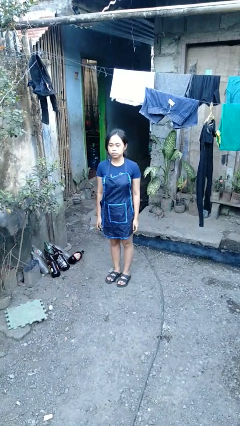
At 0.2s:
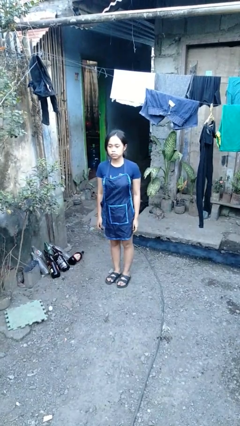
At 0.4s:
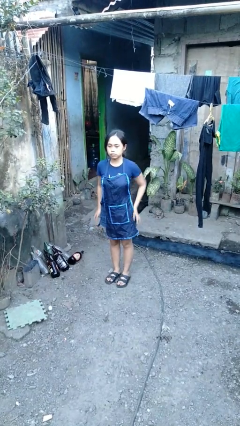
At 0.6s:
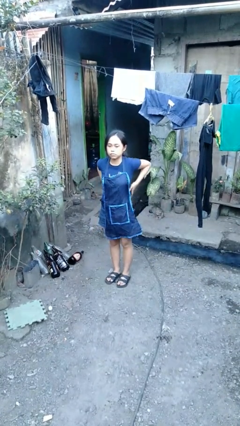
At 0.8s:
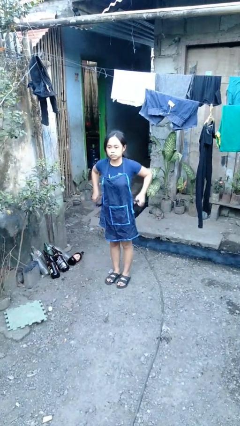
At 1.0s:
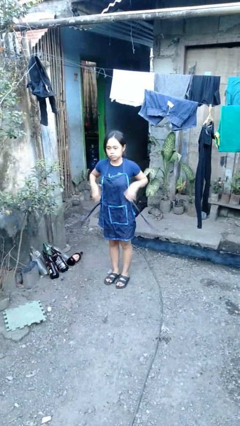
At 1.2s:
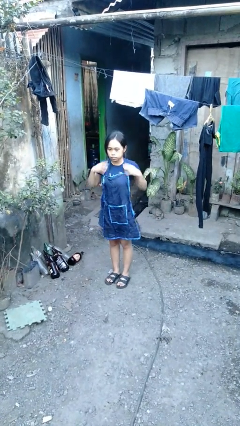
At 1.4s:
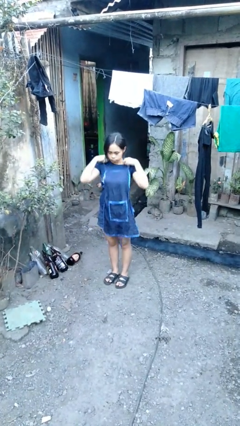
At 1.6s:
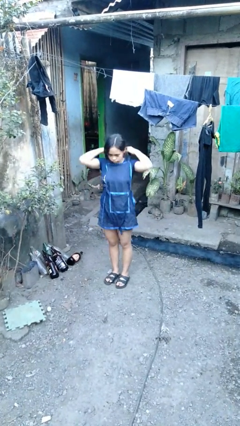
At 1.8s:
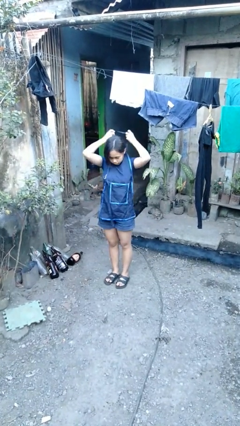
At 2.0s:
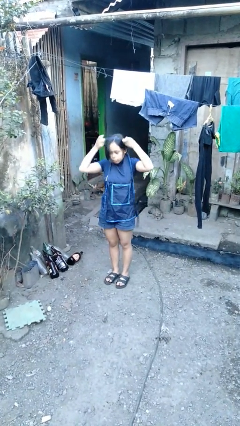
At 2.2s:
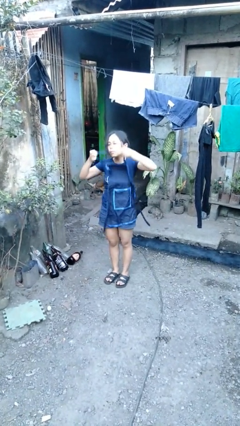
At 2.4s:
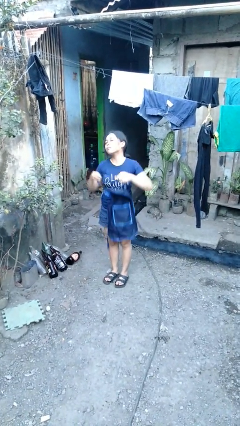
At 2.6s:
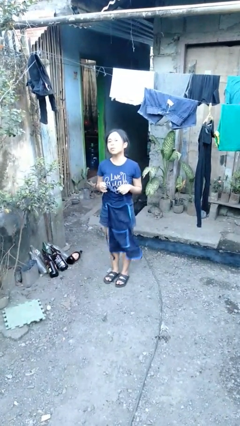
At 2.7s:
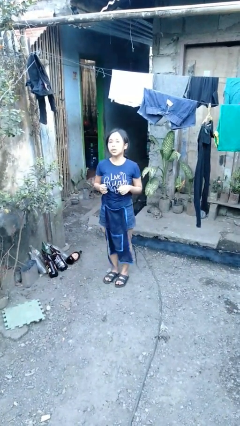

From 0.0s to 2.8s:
person takes off apron

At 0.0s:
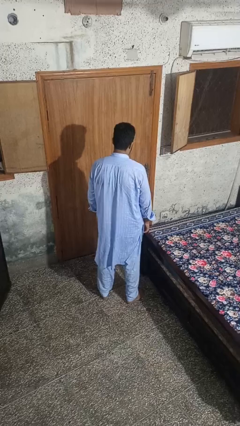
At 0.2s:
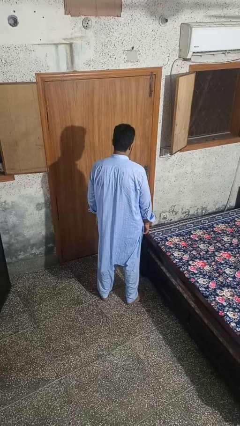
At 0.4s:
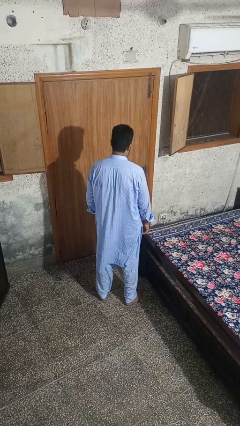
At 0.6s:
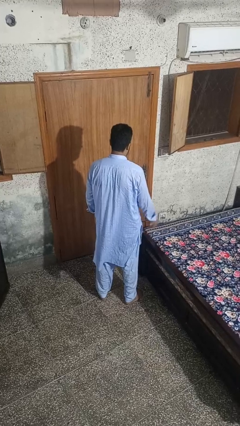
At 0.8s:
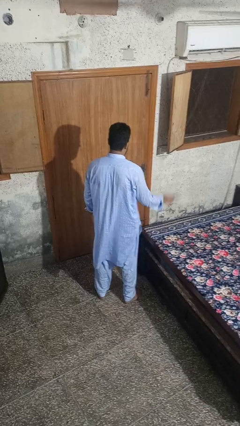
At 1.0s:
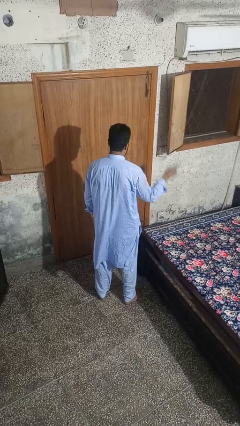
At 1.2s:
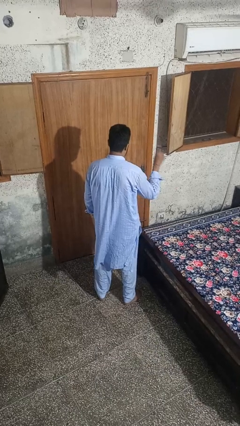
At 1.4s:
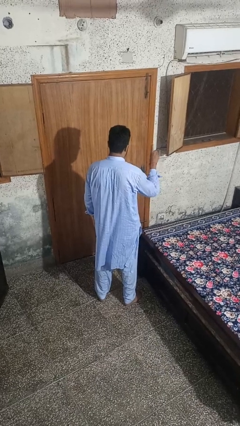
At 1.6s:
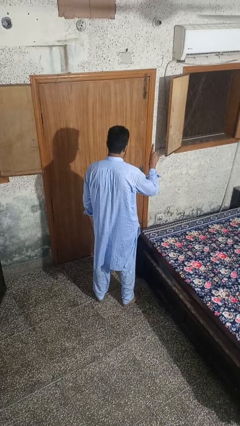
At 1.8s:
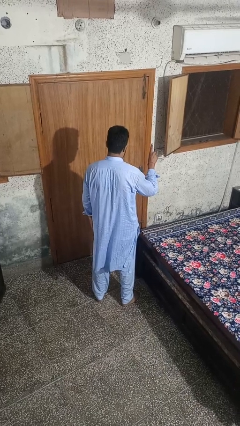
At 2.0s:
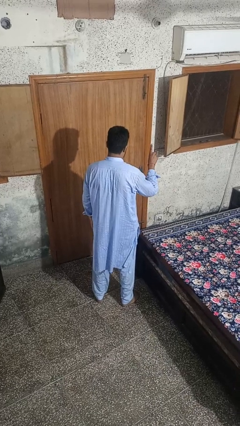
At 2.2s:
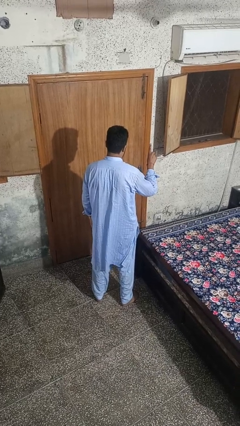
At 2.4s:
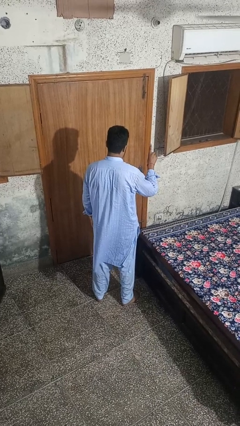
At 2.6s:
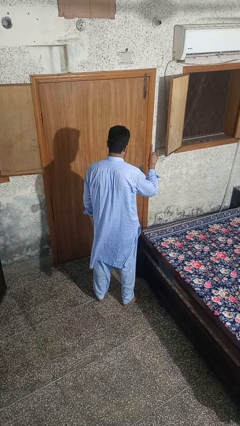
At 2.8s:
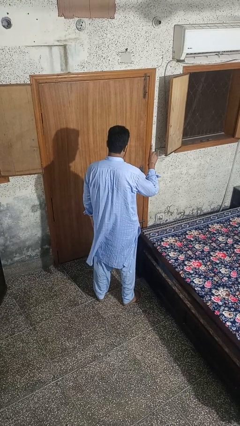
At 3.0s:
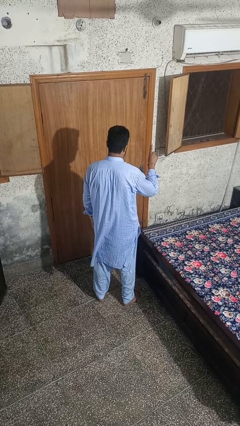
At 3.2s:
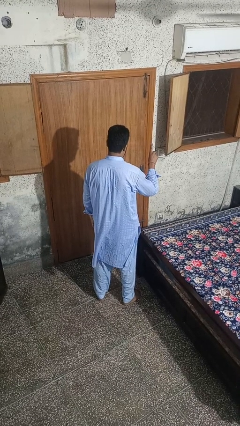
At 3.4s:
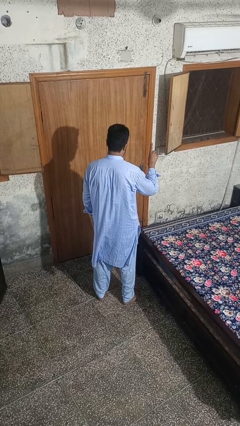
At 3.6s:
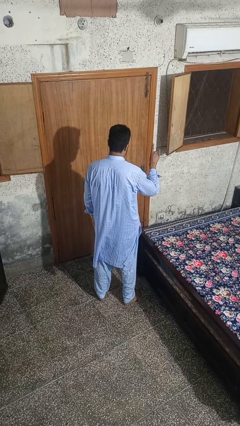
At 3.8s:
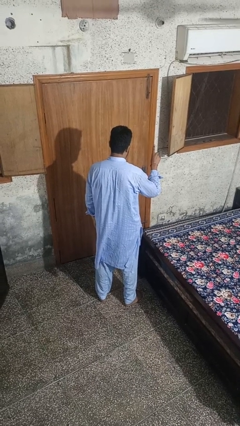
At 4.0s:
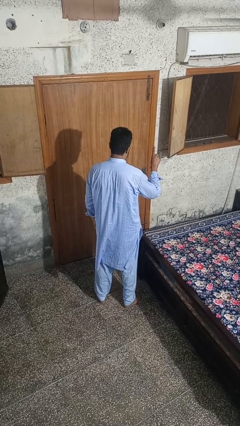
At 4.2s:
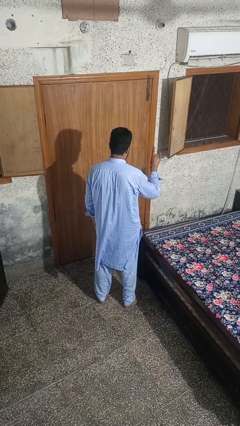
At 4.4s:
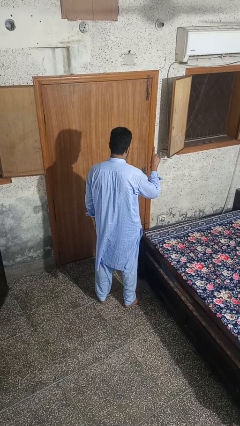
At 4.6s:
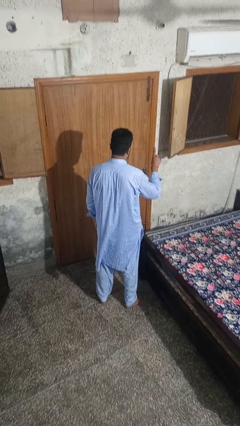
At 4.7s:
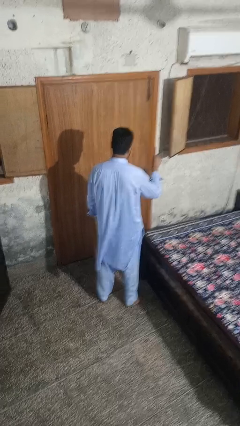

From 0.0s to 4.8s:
person gestures number one

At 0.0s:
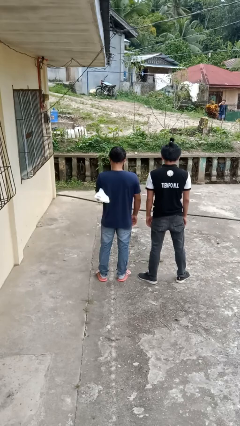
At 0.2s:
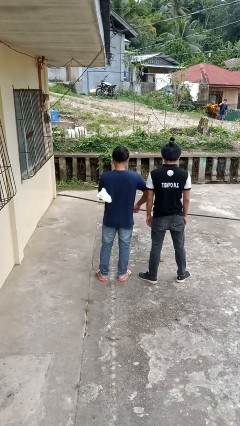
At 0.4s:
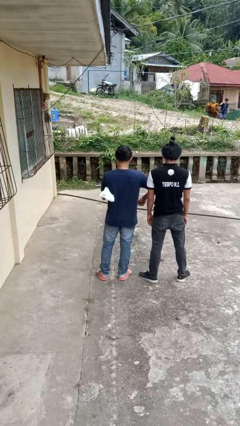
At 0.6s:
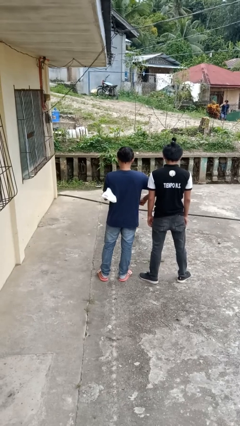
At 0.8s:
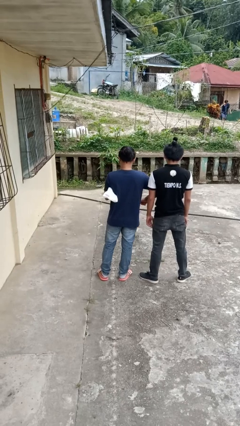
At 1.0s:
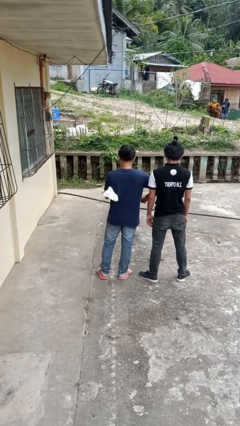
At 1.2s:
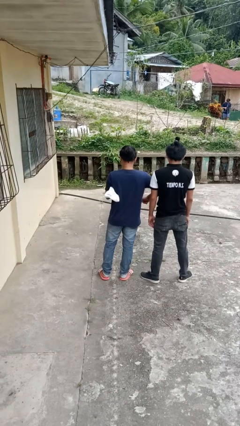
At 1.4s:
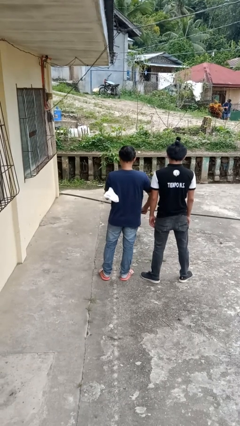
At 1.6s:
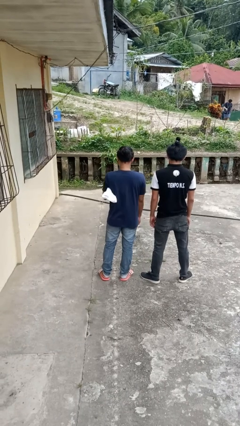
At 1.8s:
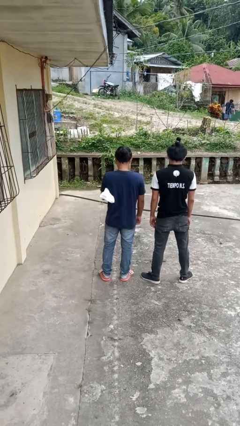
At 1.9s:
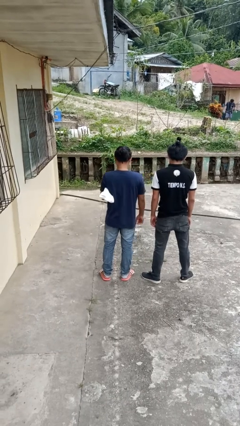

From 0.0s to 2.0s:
person nudges person with elbow

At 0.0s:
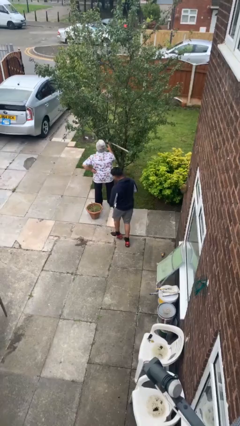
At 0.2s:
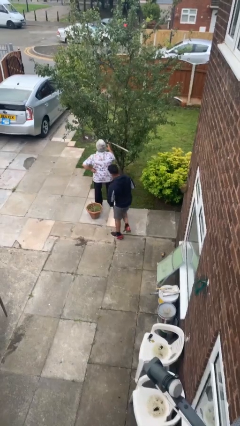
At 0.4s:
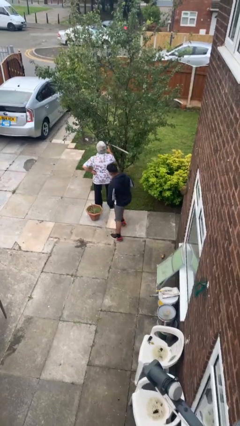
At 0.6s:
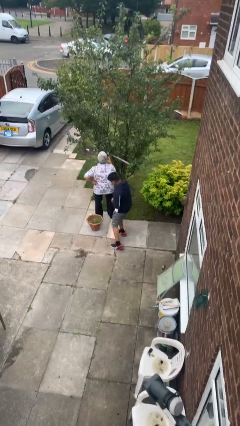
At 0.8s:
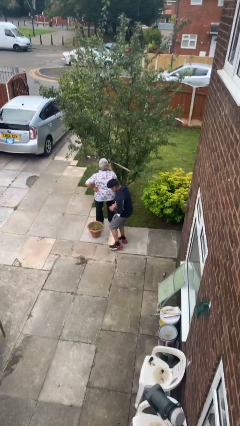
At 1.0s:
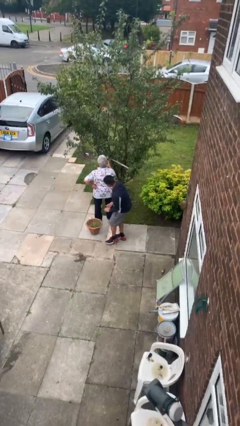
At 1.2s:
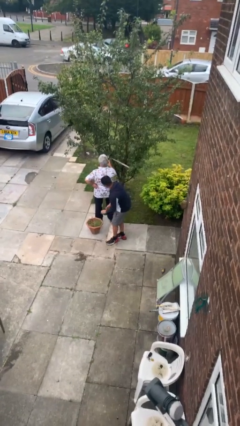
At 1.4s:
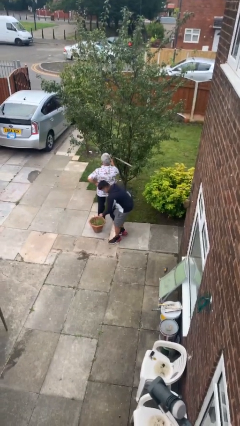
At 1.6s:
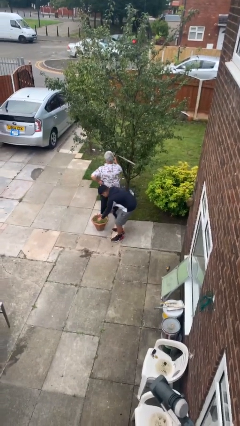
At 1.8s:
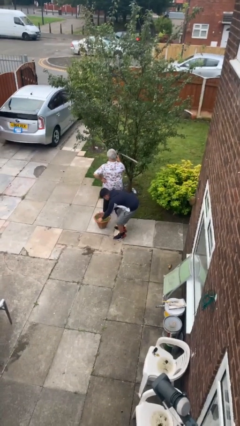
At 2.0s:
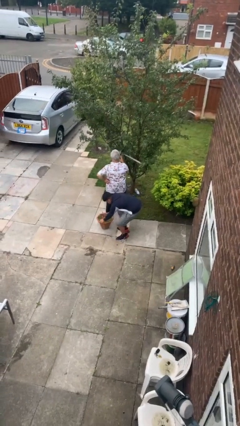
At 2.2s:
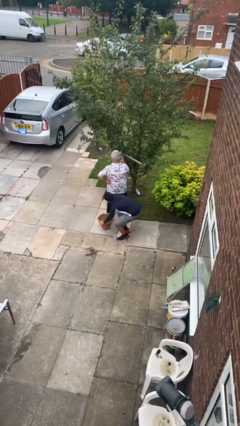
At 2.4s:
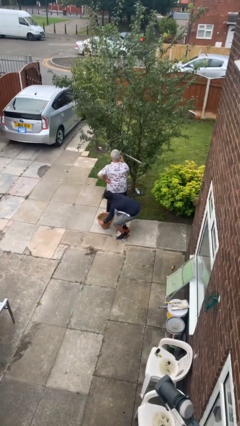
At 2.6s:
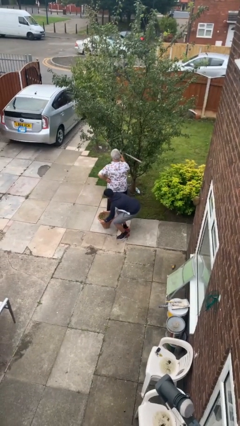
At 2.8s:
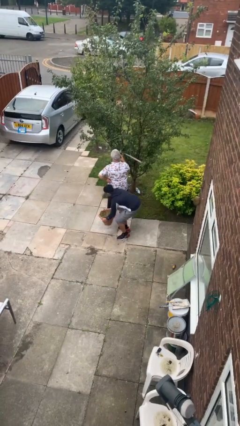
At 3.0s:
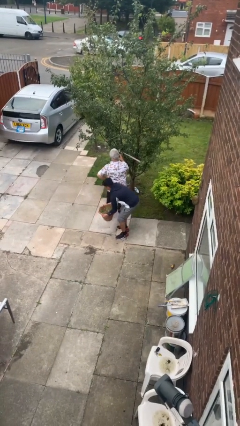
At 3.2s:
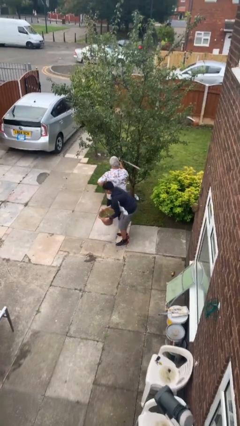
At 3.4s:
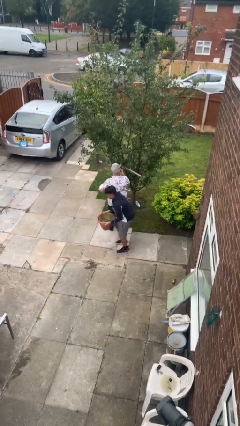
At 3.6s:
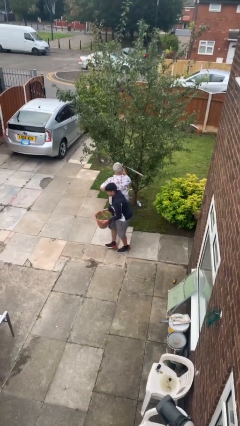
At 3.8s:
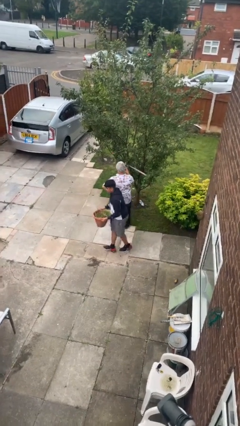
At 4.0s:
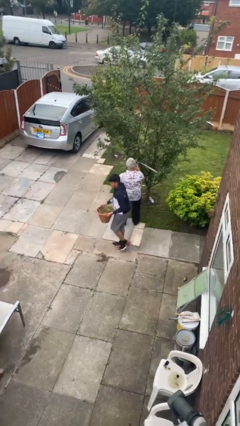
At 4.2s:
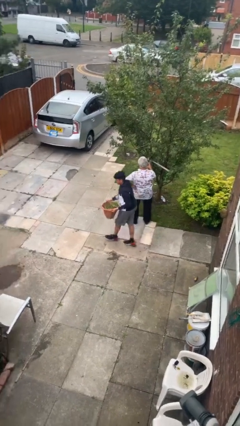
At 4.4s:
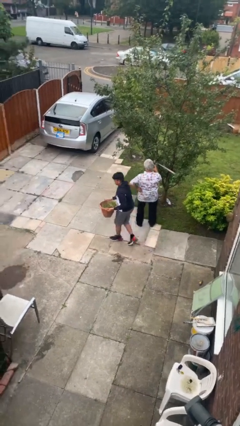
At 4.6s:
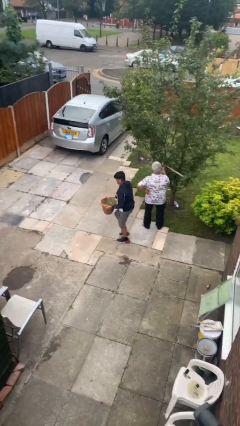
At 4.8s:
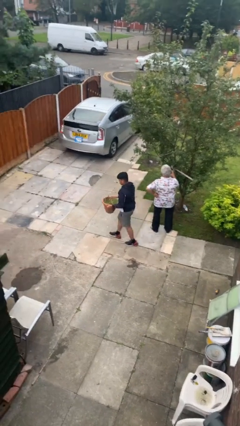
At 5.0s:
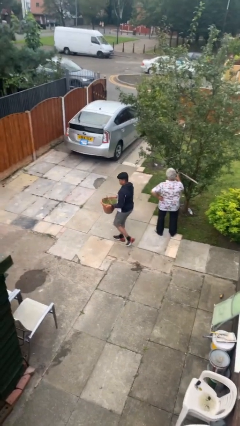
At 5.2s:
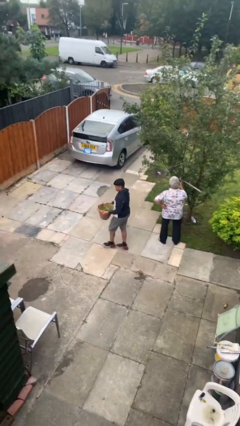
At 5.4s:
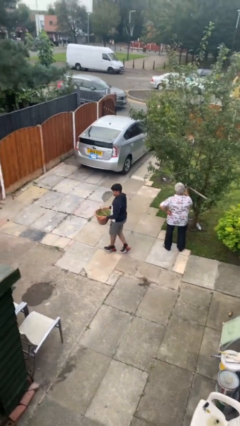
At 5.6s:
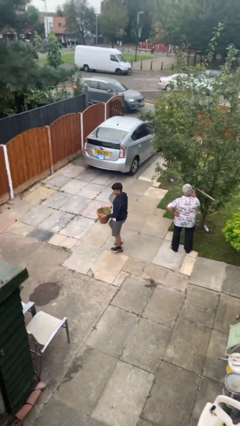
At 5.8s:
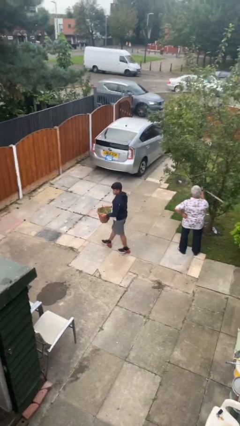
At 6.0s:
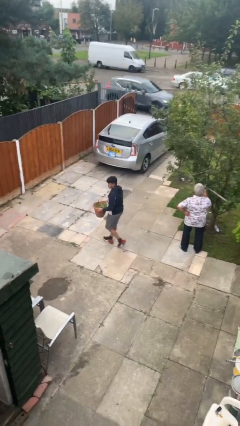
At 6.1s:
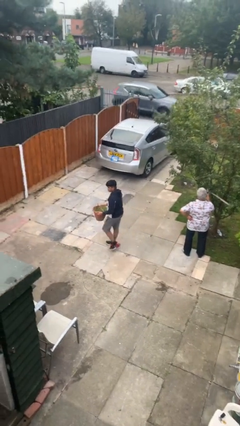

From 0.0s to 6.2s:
person steals object from person

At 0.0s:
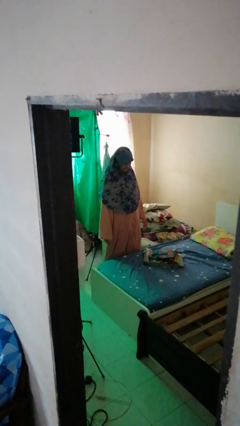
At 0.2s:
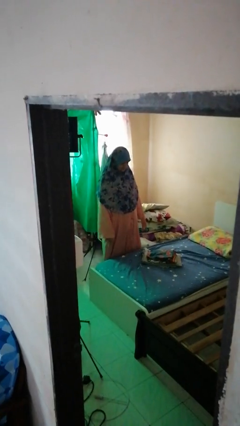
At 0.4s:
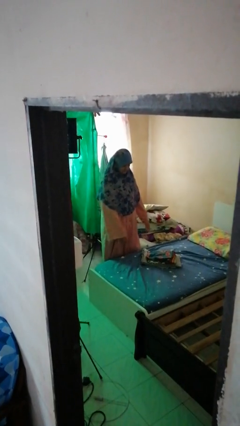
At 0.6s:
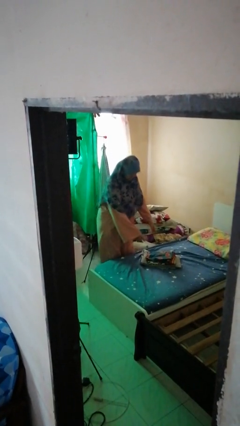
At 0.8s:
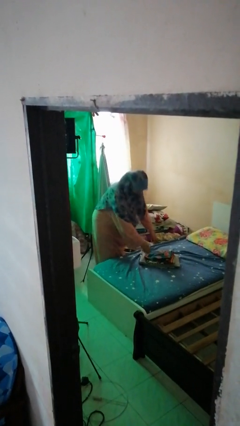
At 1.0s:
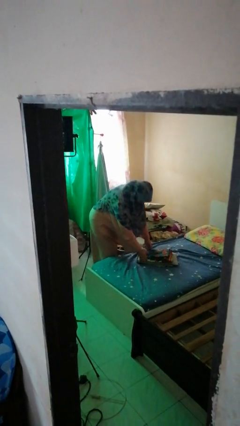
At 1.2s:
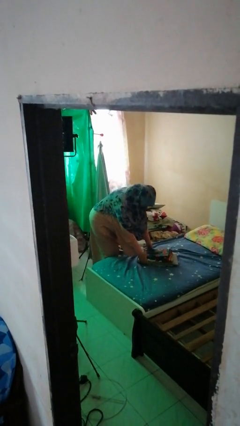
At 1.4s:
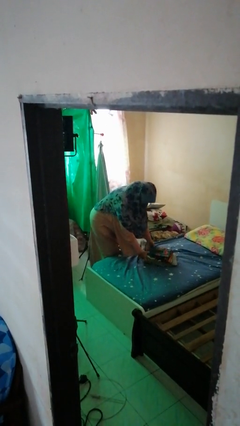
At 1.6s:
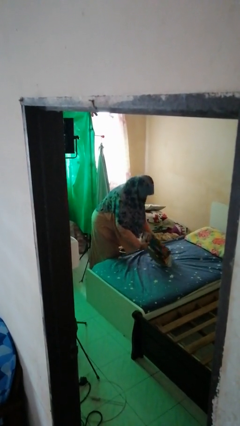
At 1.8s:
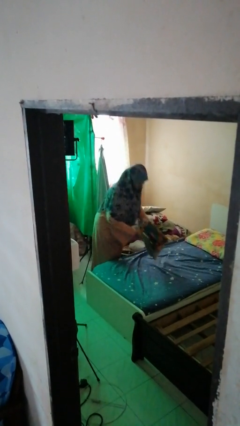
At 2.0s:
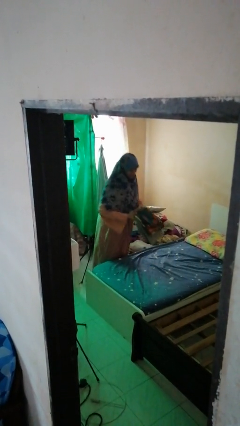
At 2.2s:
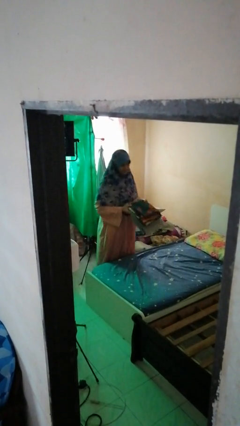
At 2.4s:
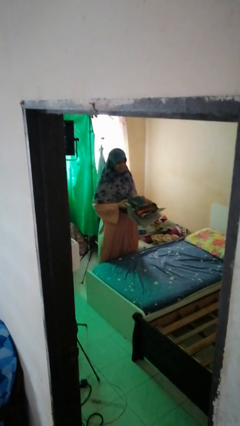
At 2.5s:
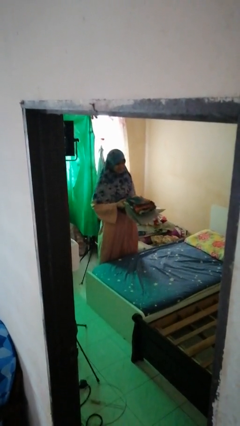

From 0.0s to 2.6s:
person picks up object from bed
